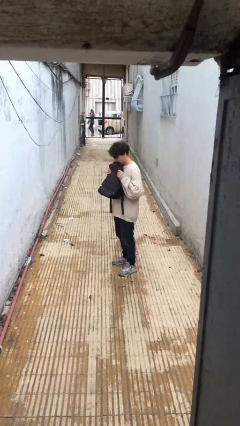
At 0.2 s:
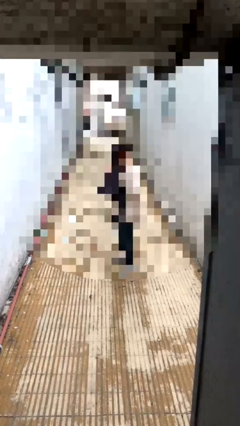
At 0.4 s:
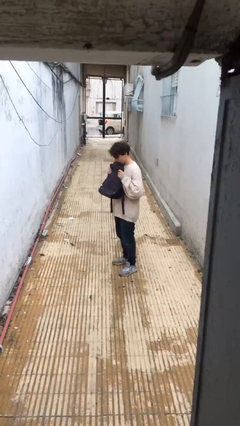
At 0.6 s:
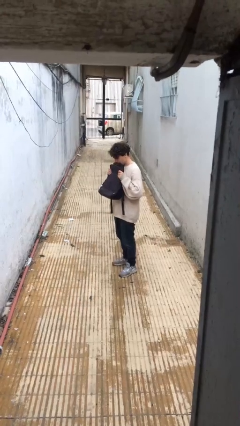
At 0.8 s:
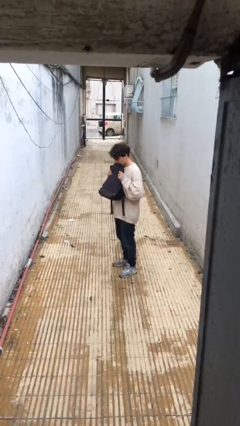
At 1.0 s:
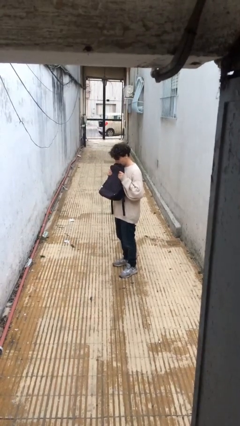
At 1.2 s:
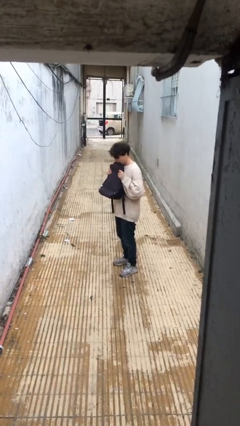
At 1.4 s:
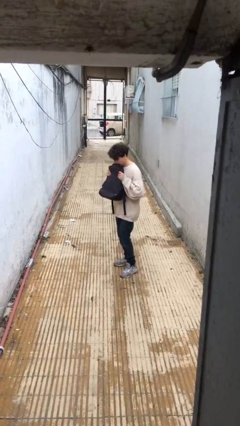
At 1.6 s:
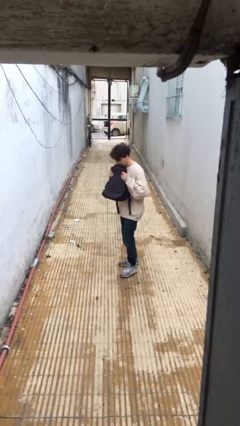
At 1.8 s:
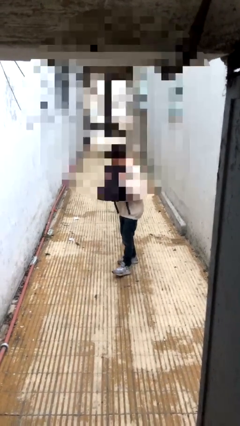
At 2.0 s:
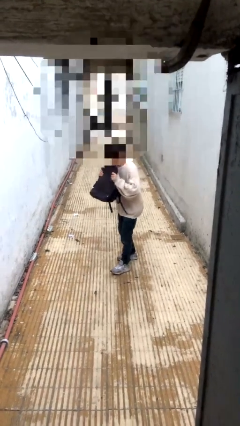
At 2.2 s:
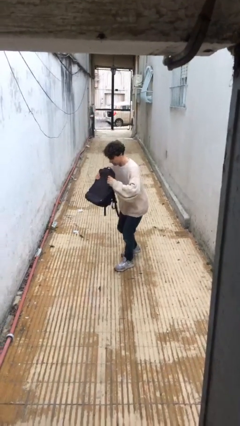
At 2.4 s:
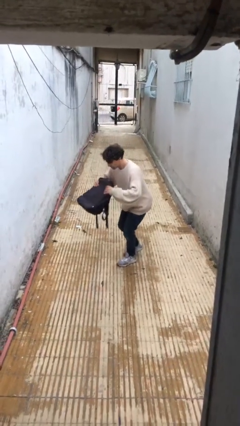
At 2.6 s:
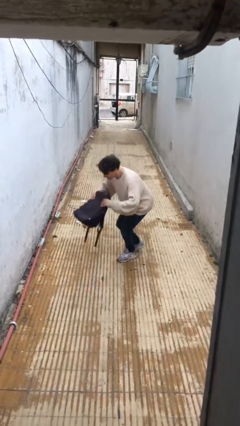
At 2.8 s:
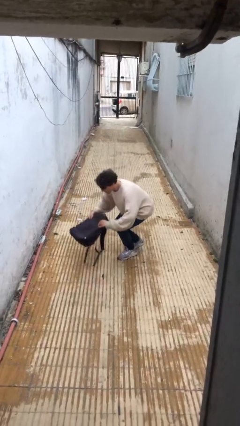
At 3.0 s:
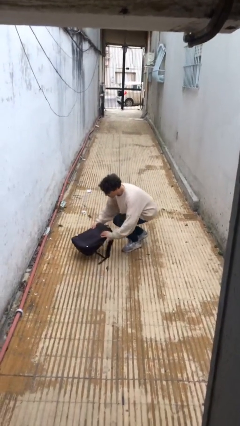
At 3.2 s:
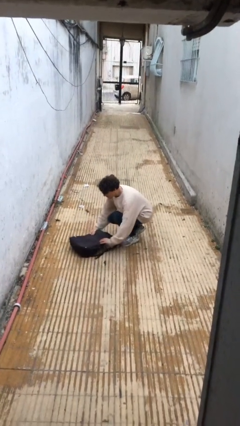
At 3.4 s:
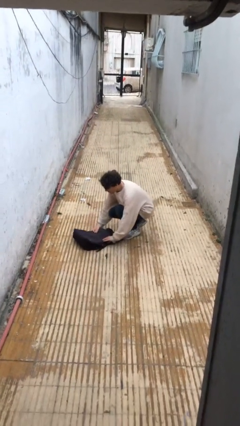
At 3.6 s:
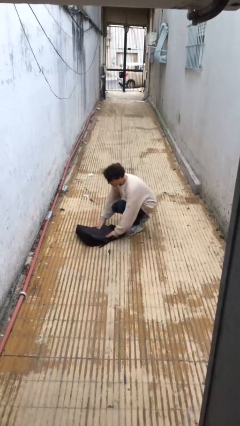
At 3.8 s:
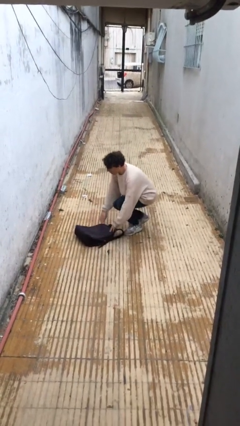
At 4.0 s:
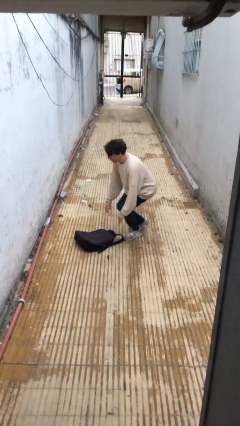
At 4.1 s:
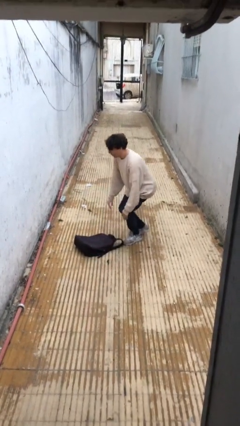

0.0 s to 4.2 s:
person puts down object on floor

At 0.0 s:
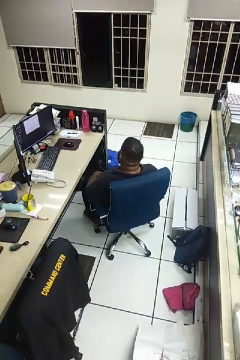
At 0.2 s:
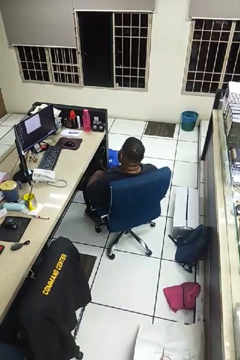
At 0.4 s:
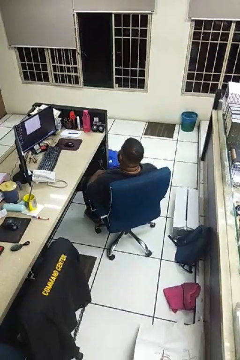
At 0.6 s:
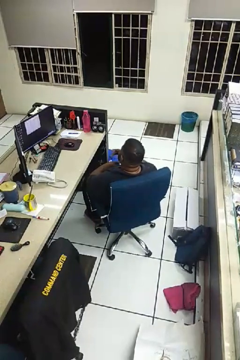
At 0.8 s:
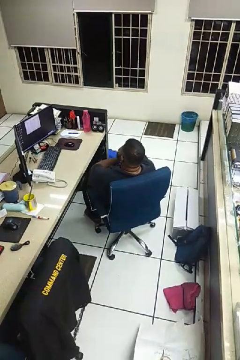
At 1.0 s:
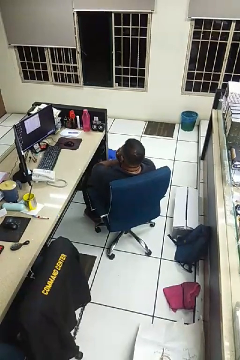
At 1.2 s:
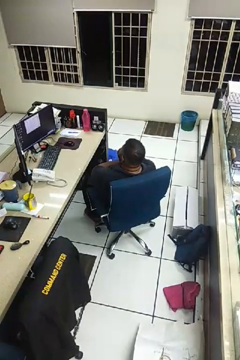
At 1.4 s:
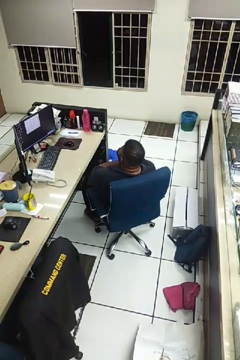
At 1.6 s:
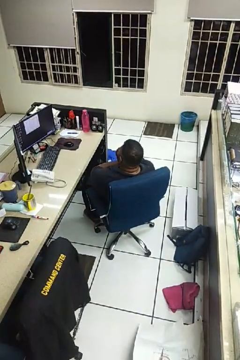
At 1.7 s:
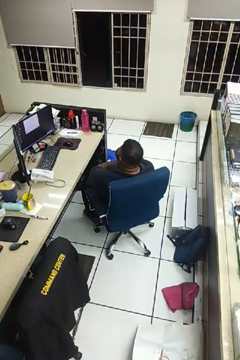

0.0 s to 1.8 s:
person strokes chin

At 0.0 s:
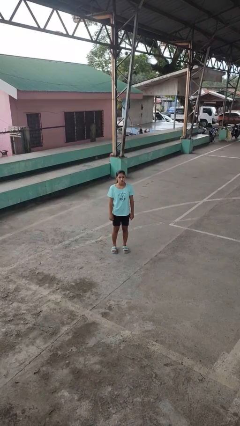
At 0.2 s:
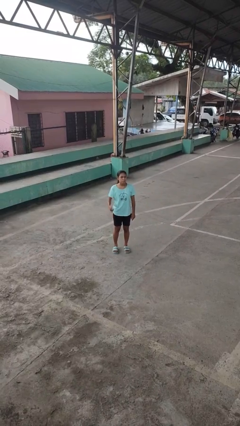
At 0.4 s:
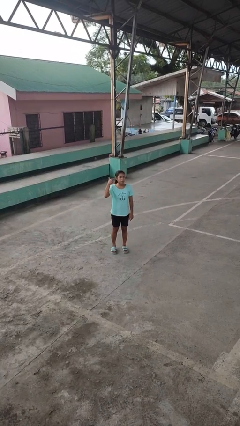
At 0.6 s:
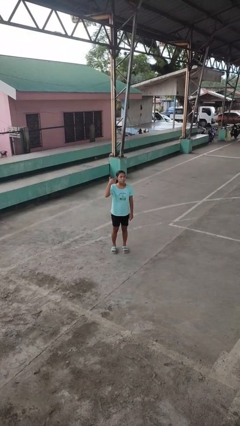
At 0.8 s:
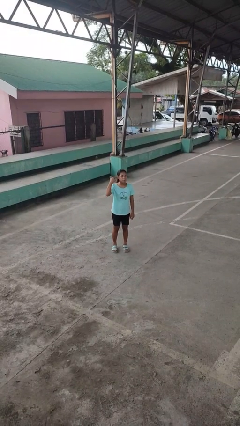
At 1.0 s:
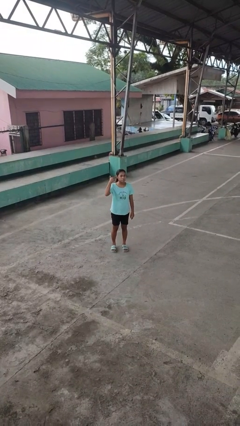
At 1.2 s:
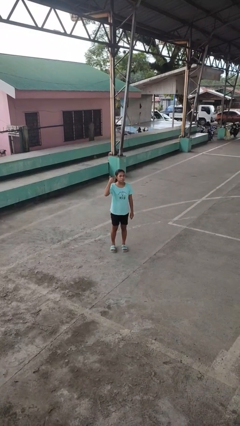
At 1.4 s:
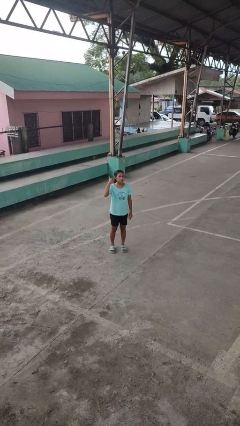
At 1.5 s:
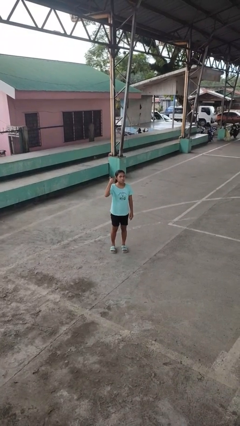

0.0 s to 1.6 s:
person gestures listen closely

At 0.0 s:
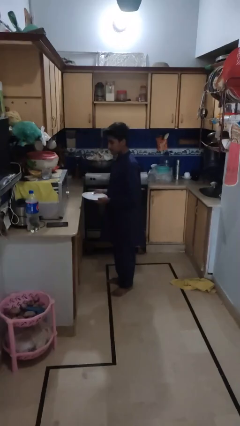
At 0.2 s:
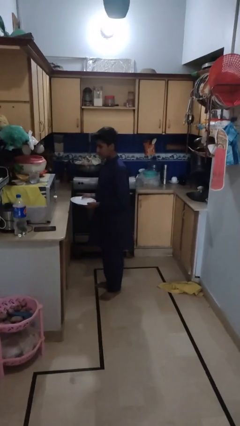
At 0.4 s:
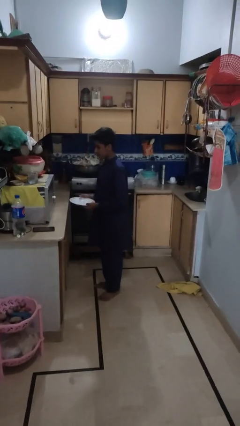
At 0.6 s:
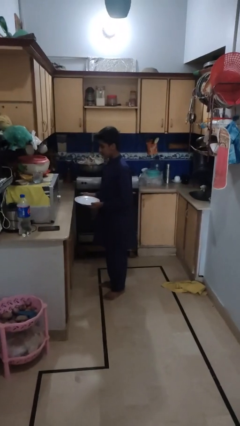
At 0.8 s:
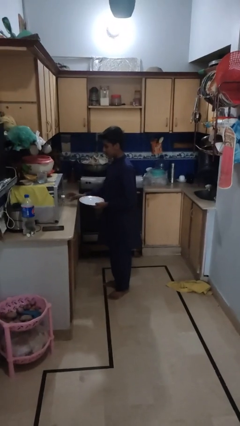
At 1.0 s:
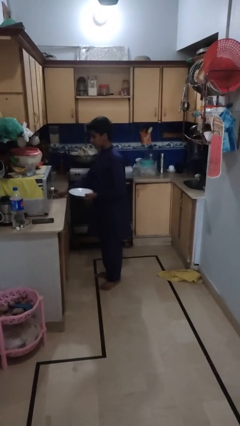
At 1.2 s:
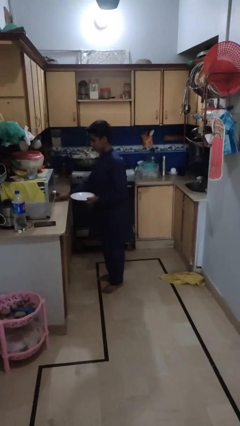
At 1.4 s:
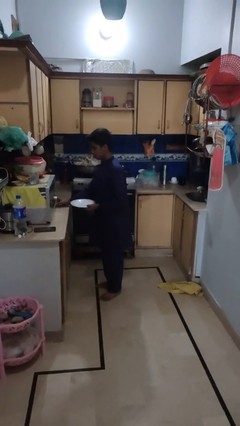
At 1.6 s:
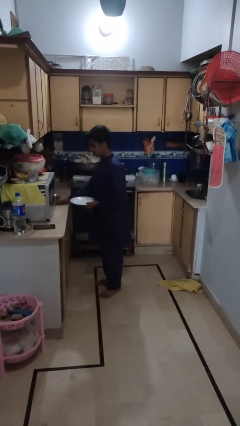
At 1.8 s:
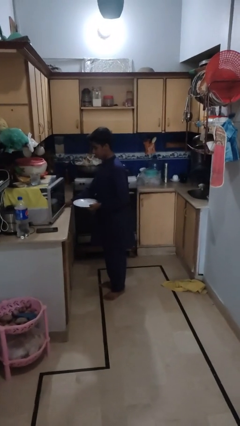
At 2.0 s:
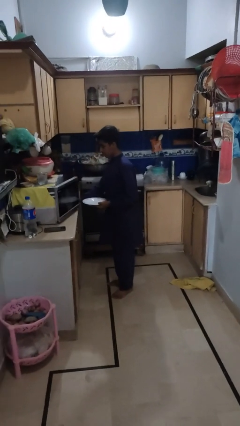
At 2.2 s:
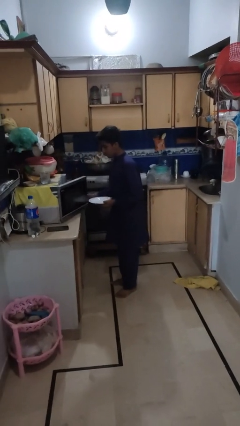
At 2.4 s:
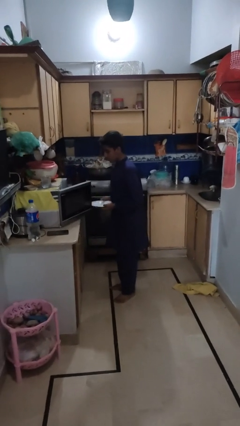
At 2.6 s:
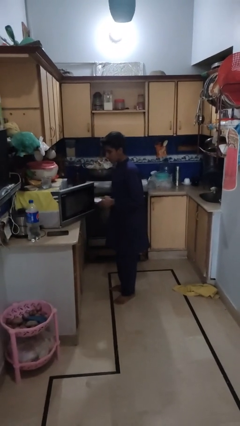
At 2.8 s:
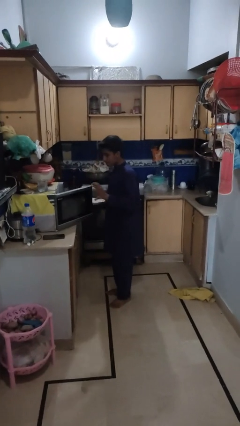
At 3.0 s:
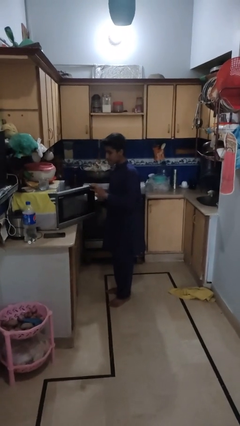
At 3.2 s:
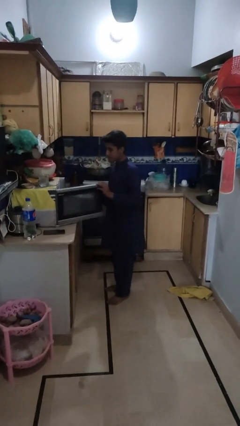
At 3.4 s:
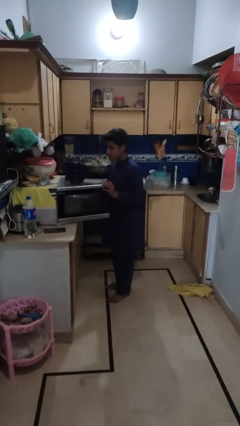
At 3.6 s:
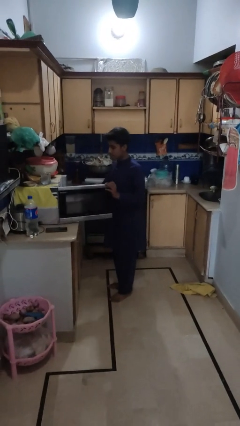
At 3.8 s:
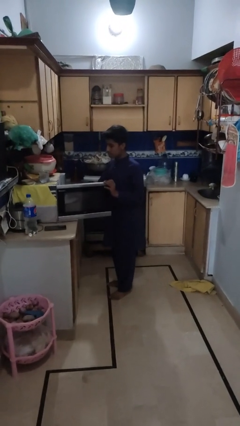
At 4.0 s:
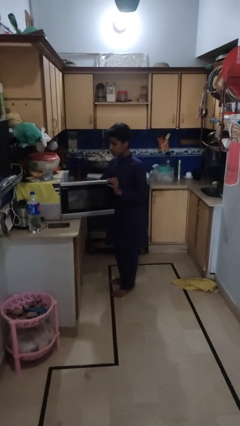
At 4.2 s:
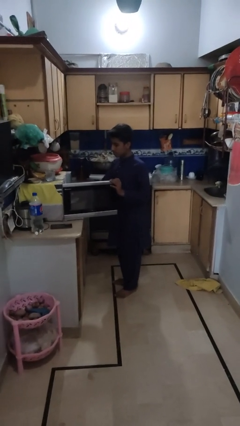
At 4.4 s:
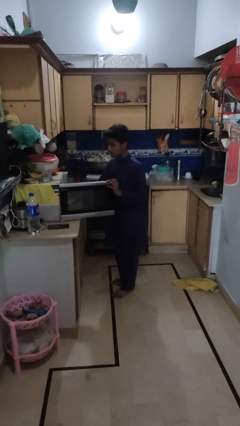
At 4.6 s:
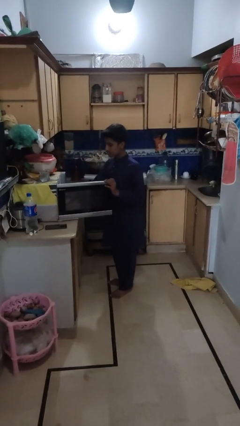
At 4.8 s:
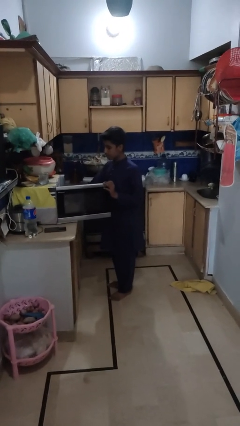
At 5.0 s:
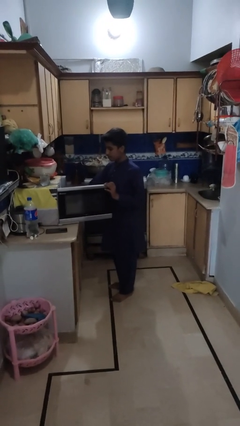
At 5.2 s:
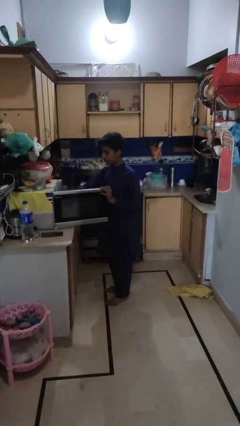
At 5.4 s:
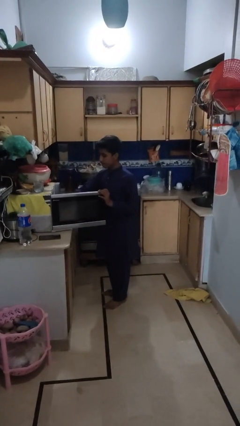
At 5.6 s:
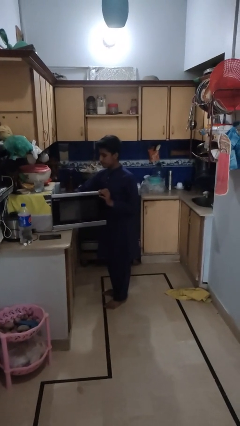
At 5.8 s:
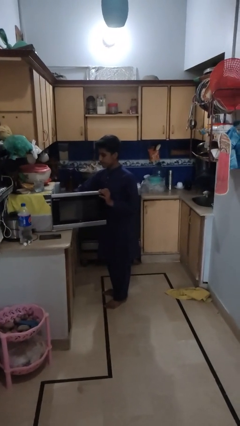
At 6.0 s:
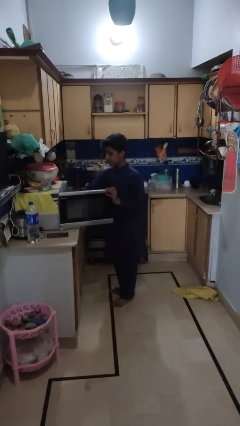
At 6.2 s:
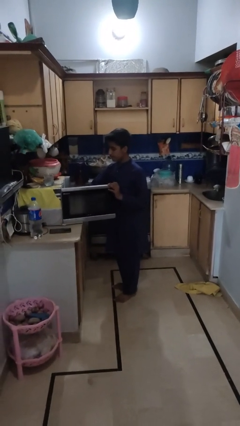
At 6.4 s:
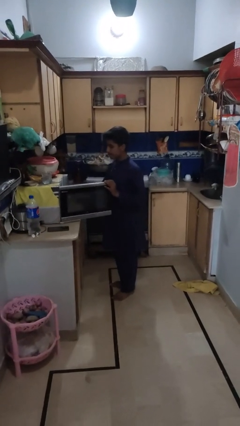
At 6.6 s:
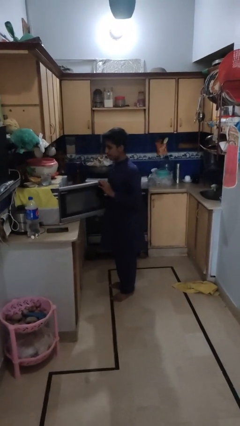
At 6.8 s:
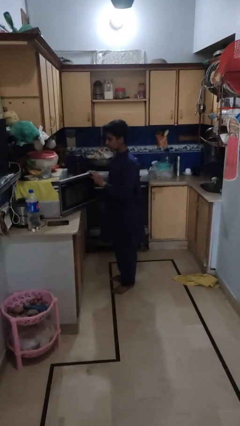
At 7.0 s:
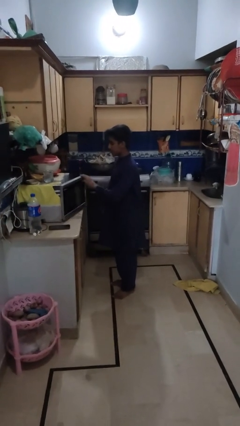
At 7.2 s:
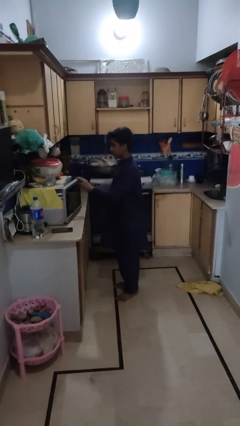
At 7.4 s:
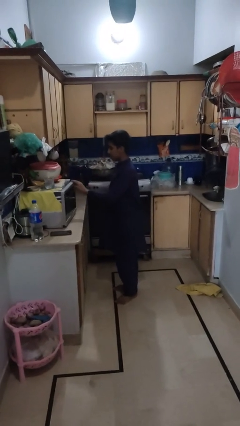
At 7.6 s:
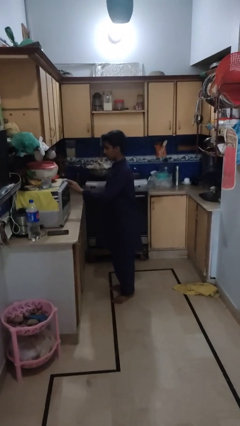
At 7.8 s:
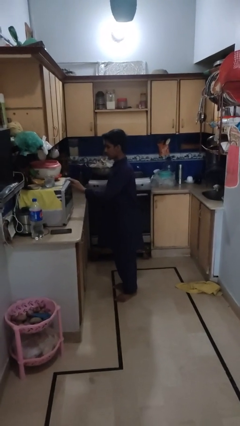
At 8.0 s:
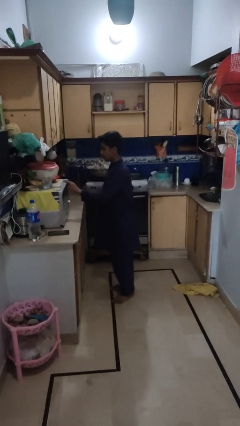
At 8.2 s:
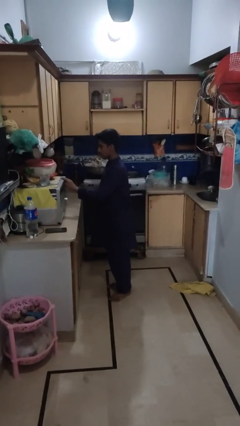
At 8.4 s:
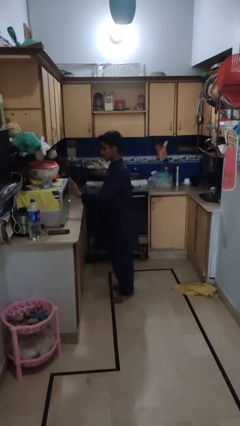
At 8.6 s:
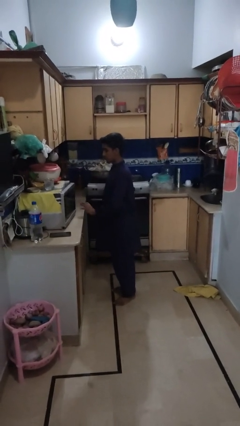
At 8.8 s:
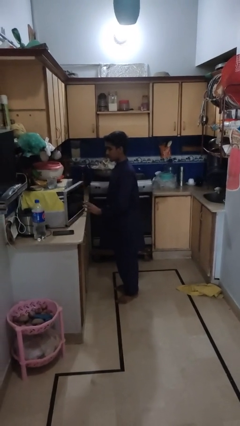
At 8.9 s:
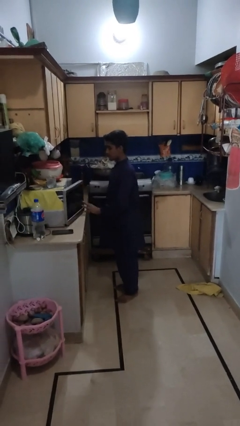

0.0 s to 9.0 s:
person puts object into microwave

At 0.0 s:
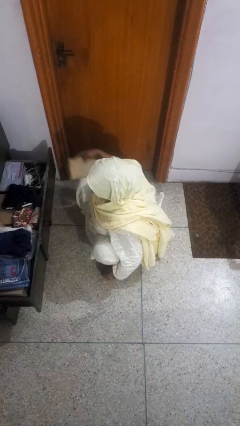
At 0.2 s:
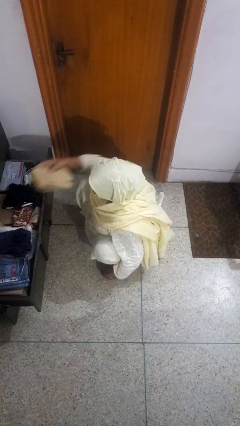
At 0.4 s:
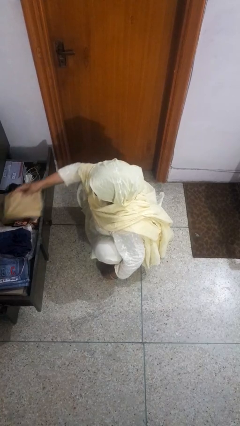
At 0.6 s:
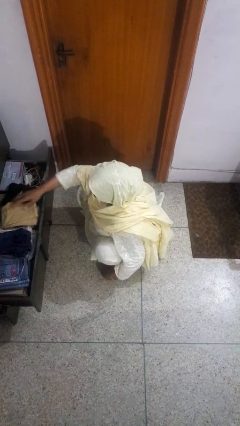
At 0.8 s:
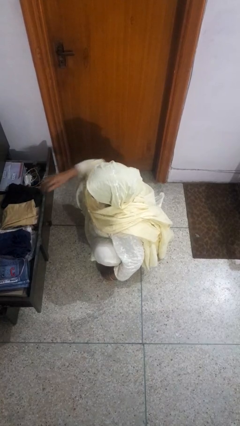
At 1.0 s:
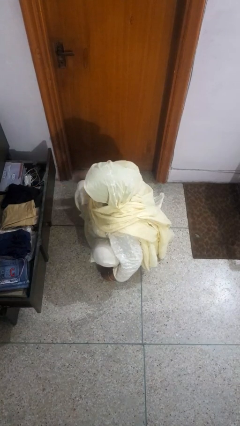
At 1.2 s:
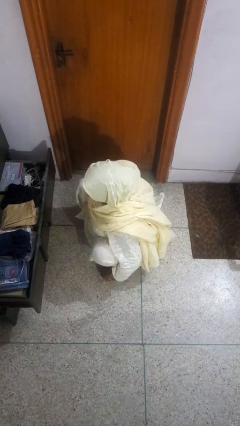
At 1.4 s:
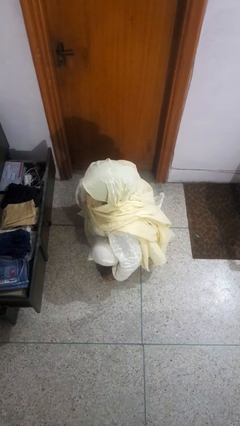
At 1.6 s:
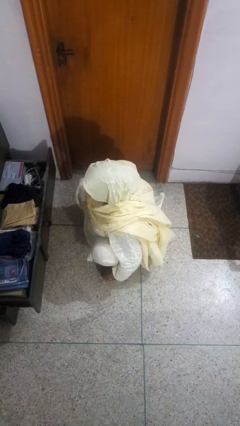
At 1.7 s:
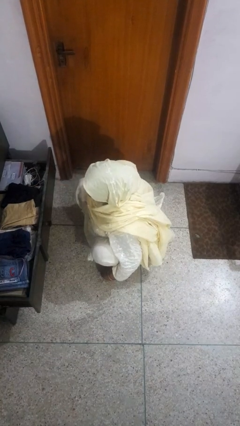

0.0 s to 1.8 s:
person puts clothes into dresser
